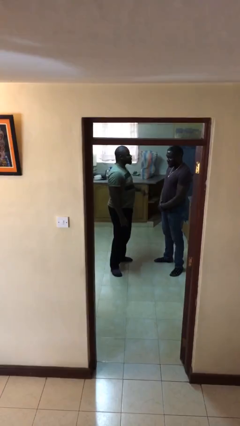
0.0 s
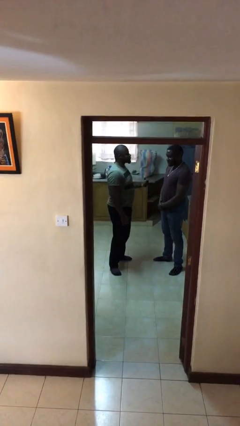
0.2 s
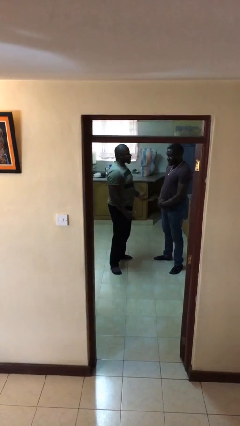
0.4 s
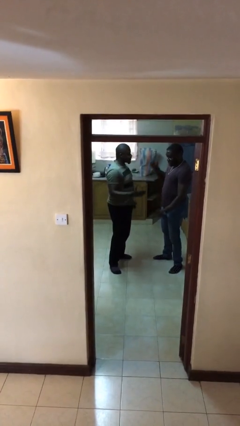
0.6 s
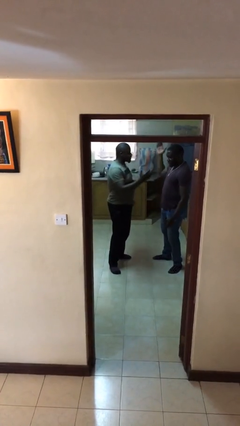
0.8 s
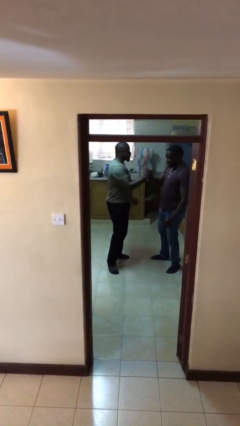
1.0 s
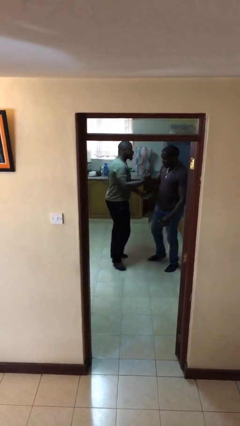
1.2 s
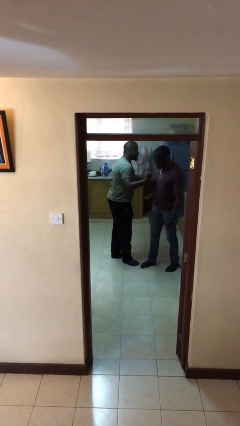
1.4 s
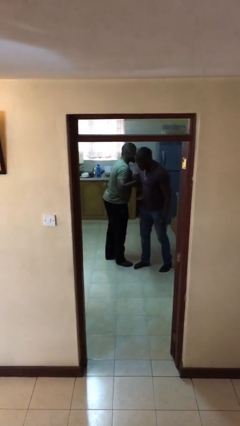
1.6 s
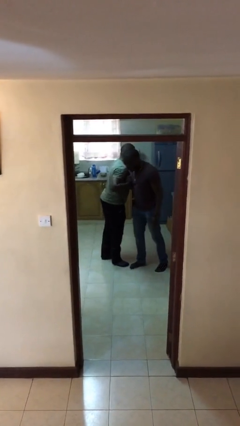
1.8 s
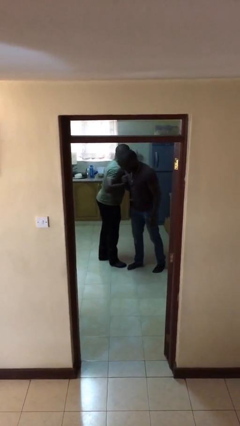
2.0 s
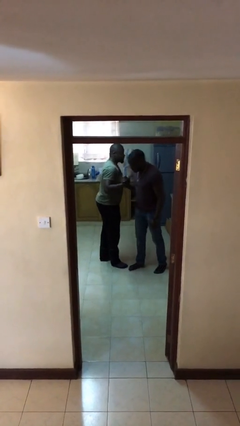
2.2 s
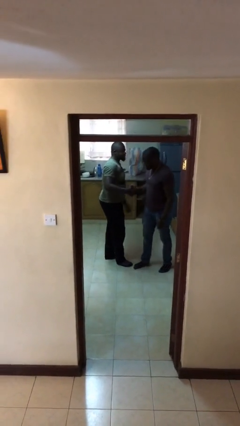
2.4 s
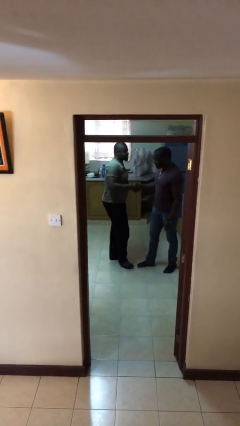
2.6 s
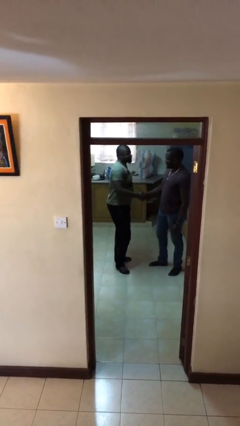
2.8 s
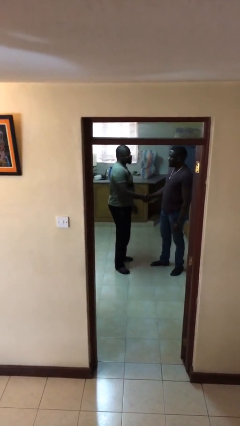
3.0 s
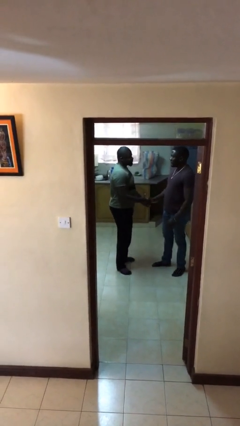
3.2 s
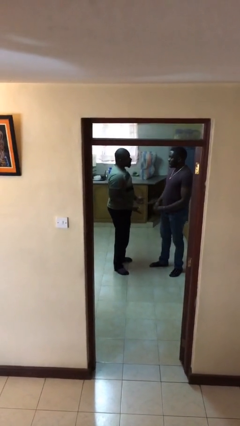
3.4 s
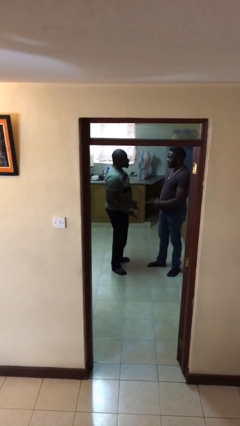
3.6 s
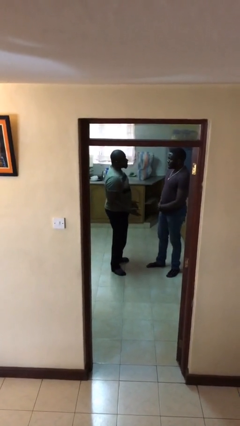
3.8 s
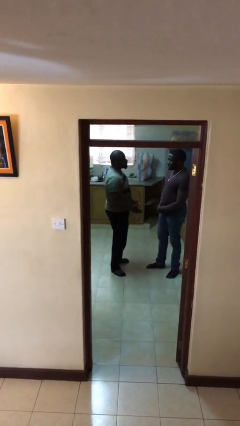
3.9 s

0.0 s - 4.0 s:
person embraces person

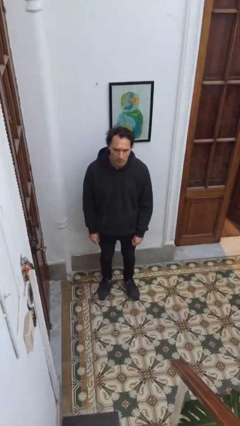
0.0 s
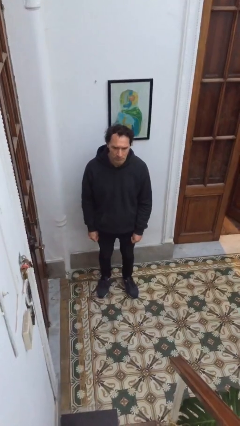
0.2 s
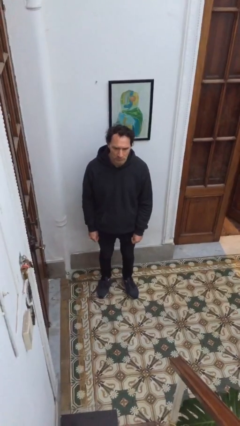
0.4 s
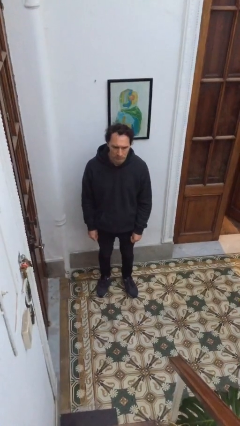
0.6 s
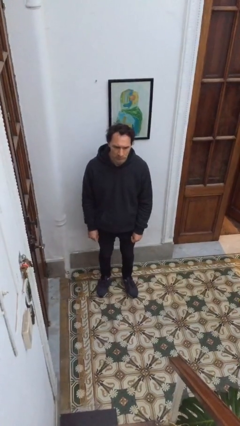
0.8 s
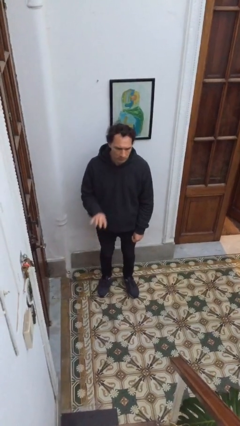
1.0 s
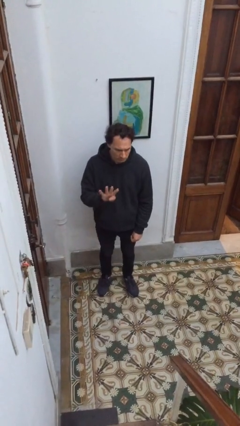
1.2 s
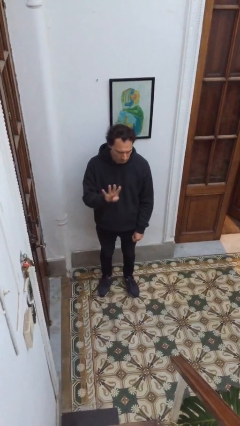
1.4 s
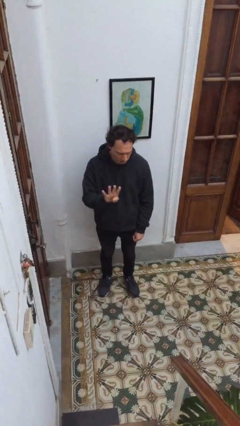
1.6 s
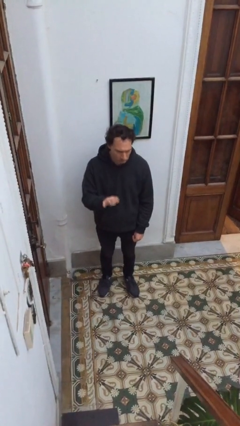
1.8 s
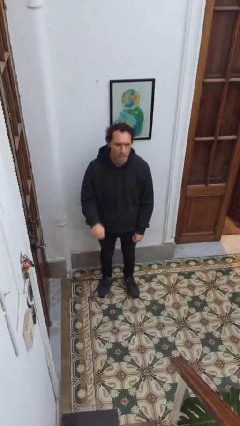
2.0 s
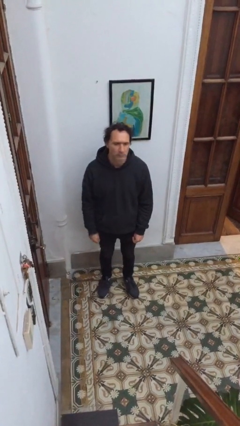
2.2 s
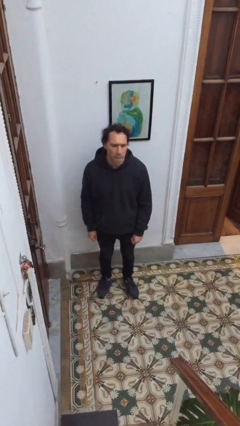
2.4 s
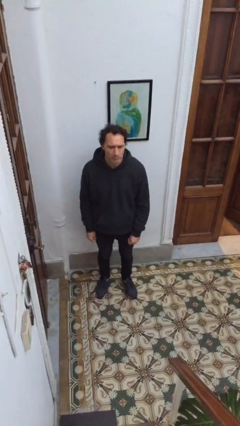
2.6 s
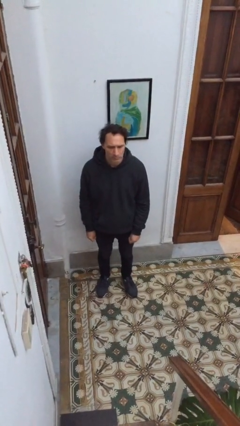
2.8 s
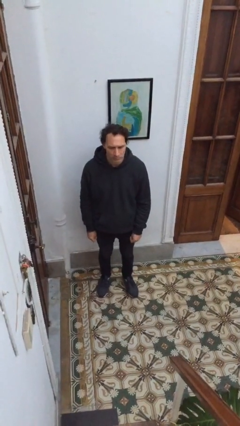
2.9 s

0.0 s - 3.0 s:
person gestures number four

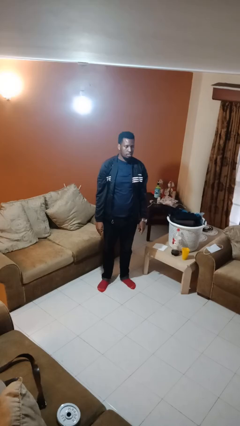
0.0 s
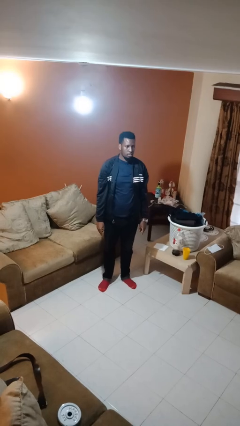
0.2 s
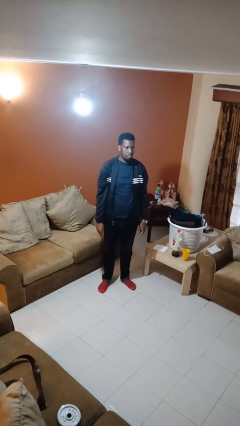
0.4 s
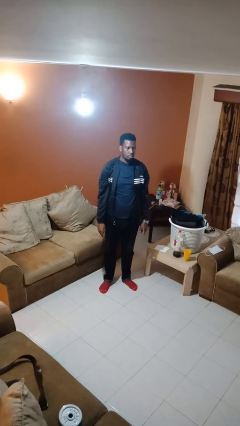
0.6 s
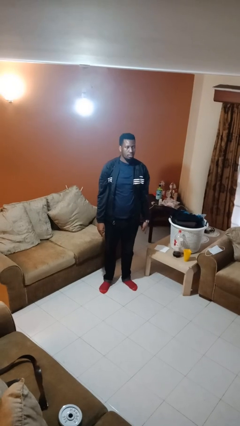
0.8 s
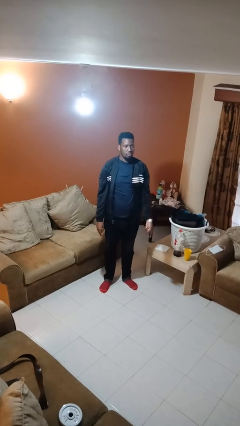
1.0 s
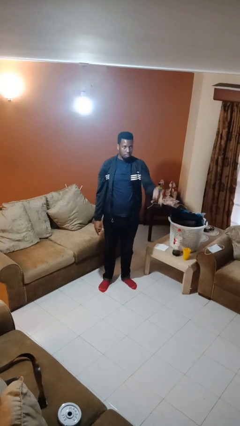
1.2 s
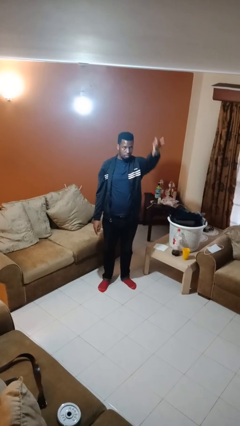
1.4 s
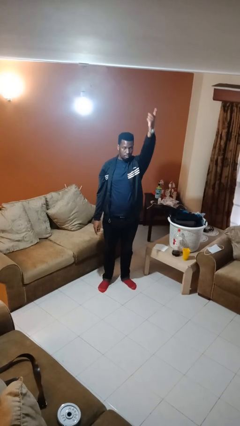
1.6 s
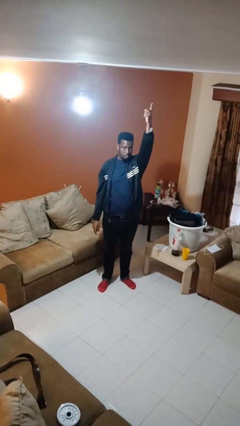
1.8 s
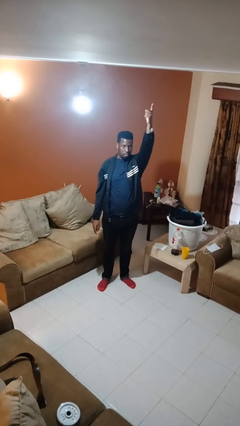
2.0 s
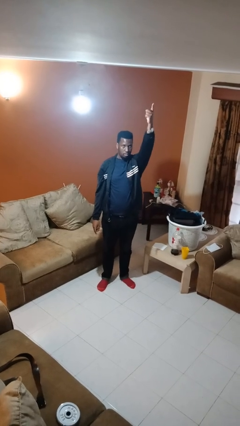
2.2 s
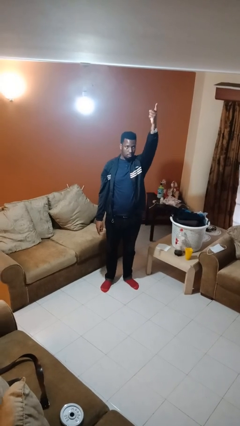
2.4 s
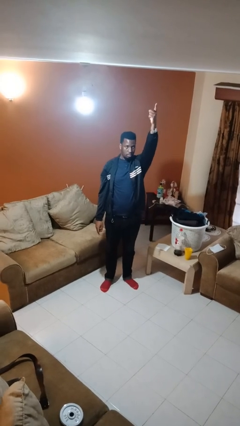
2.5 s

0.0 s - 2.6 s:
person gestures swipe up

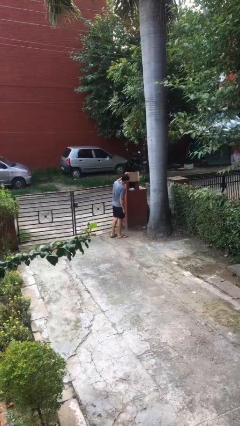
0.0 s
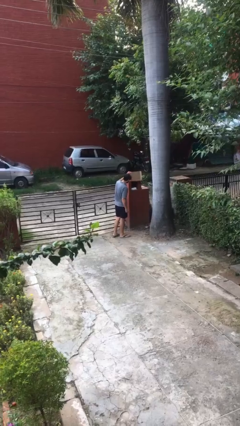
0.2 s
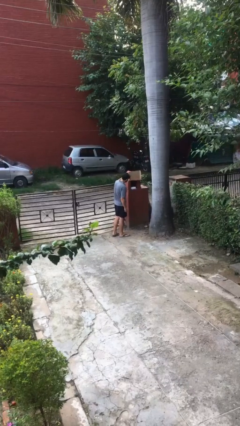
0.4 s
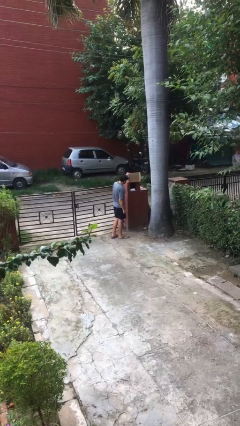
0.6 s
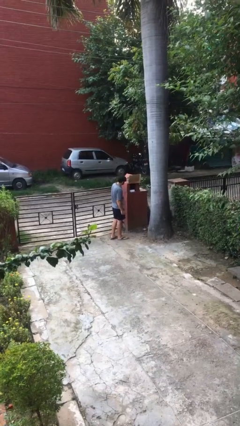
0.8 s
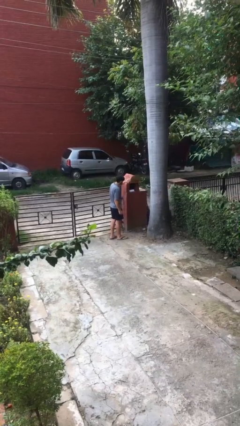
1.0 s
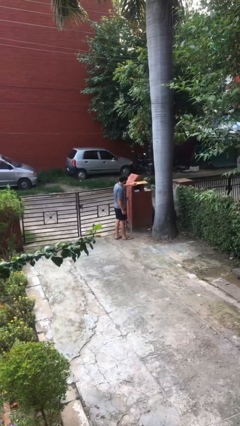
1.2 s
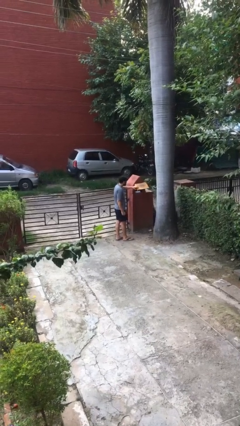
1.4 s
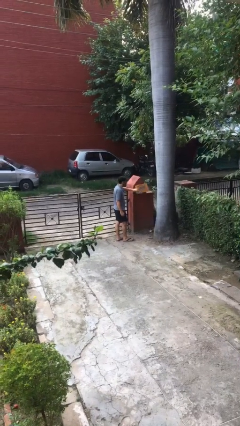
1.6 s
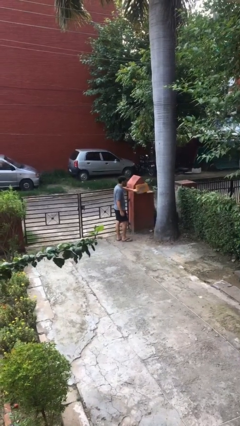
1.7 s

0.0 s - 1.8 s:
person closes mailbox

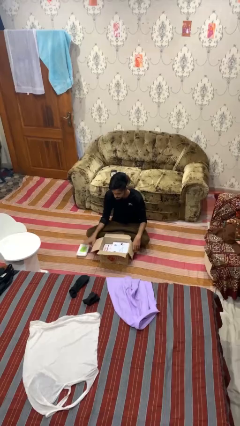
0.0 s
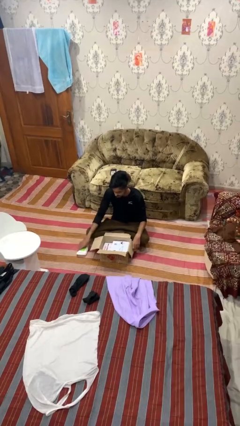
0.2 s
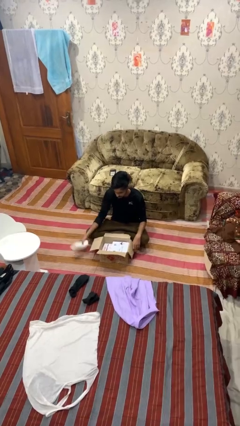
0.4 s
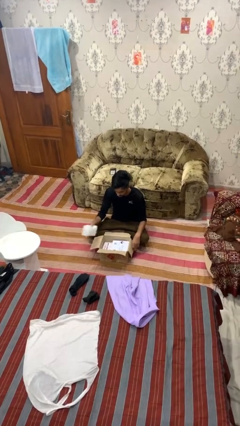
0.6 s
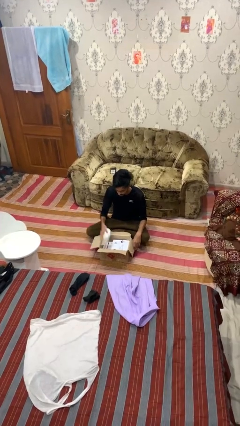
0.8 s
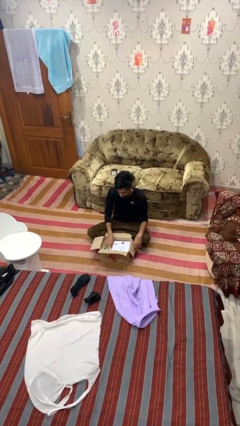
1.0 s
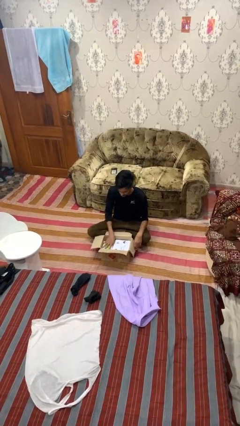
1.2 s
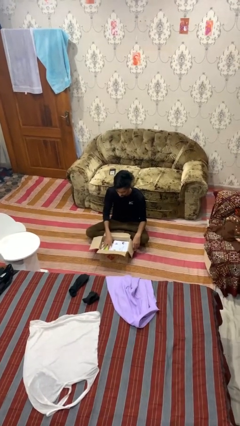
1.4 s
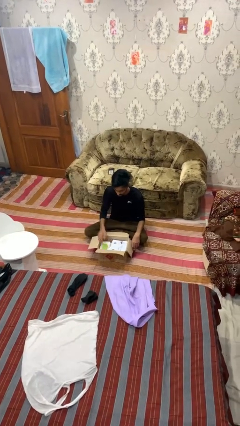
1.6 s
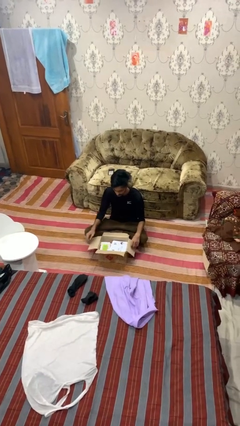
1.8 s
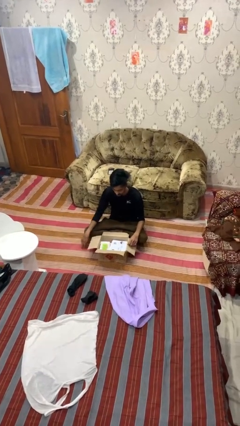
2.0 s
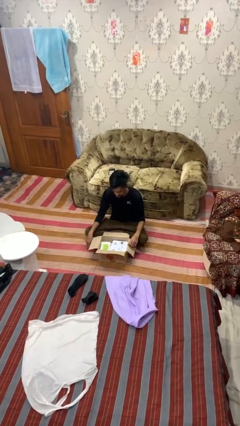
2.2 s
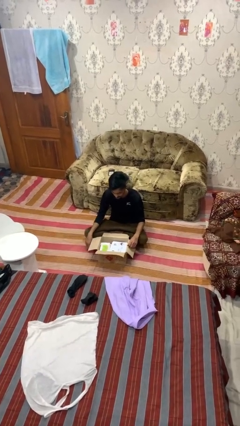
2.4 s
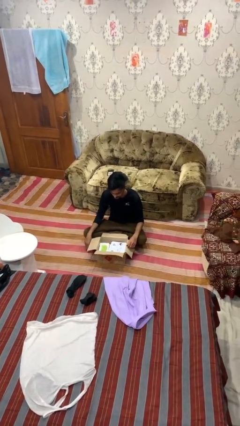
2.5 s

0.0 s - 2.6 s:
person puts object into box

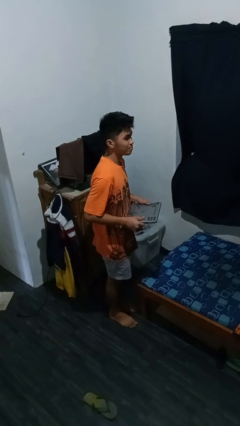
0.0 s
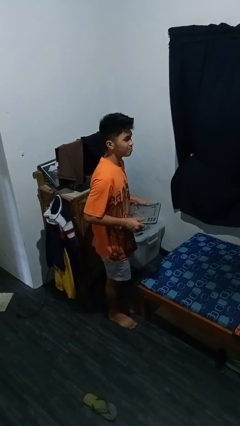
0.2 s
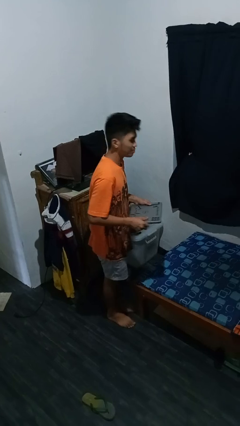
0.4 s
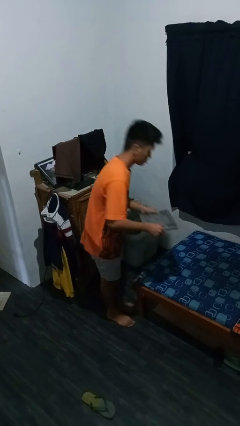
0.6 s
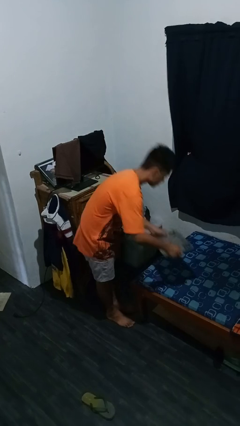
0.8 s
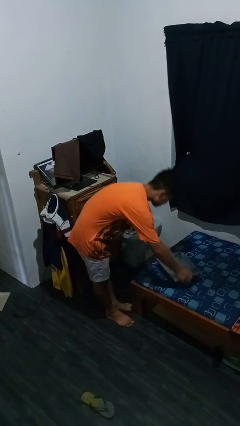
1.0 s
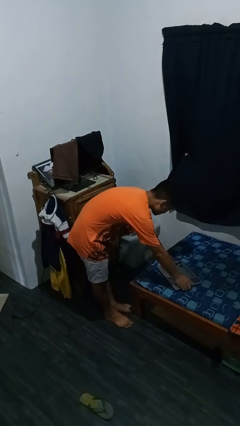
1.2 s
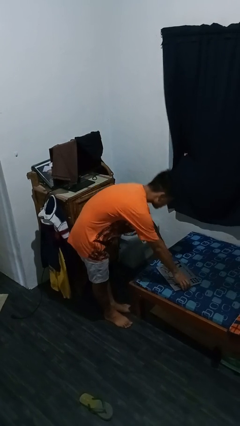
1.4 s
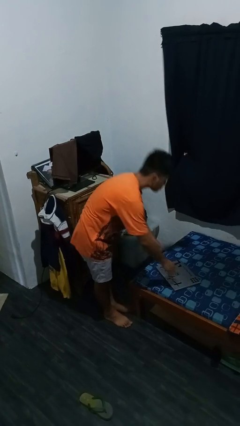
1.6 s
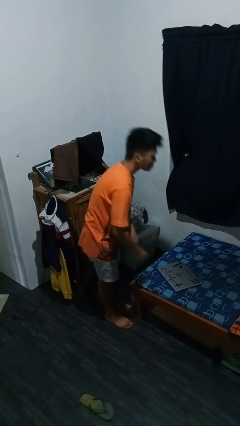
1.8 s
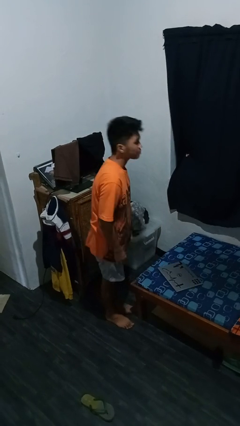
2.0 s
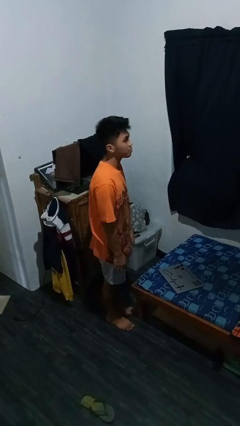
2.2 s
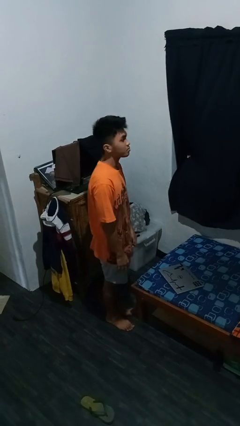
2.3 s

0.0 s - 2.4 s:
person puts down object on bed

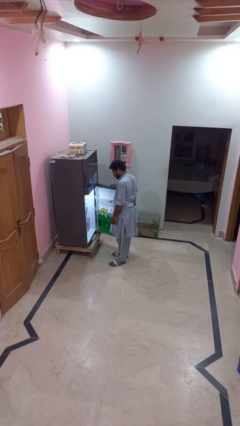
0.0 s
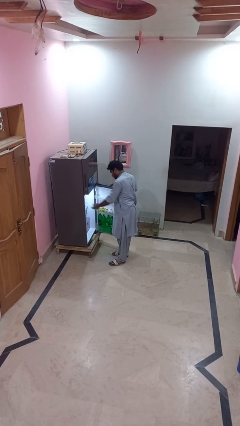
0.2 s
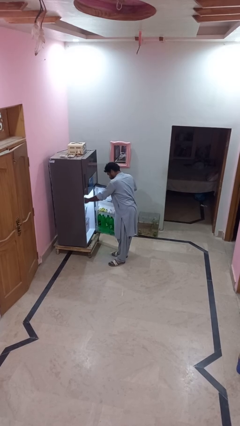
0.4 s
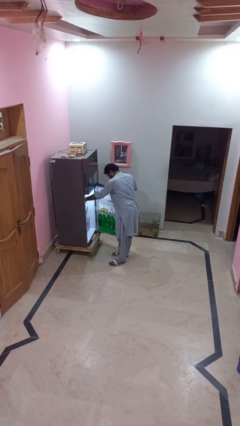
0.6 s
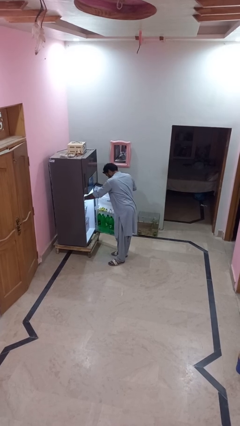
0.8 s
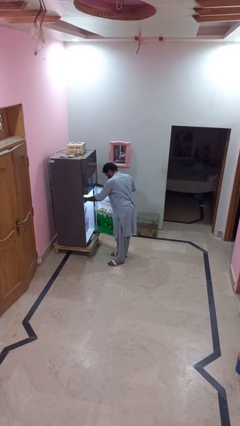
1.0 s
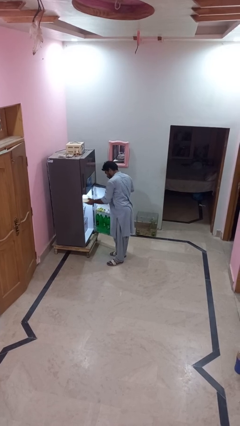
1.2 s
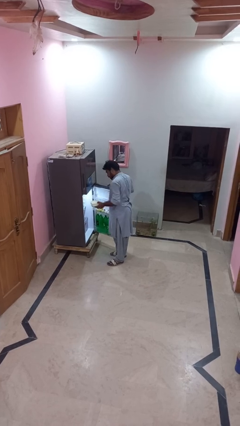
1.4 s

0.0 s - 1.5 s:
person takes object from refrigerator
